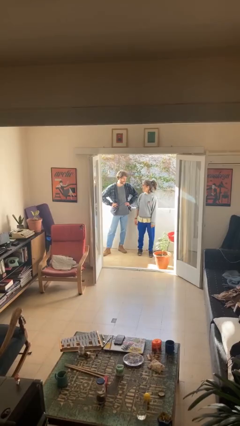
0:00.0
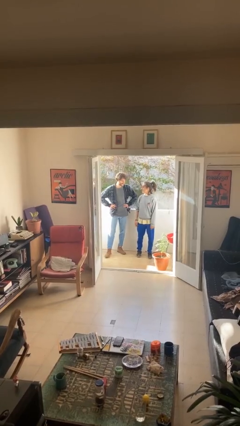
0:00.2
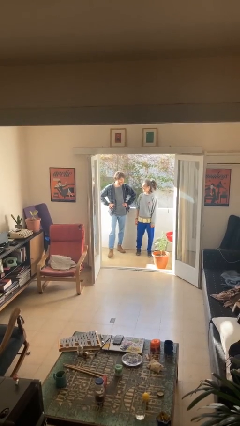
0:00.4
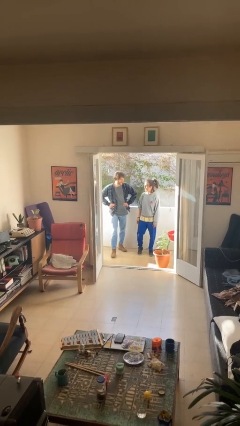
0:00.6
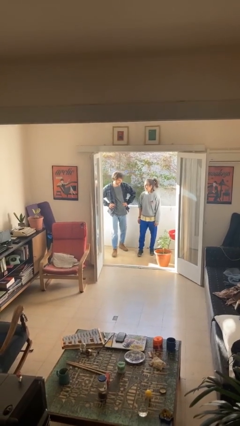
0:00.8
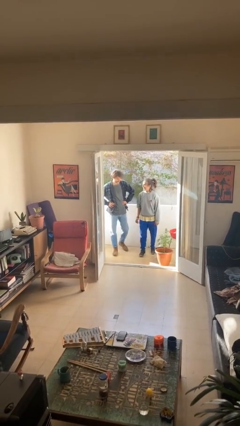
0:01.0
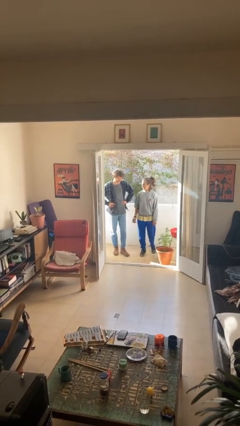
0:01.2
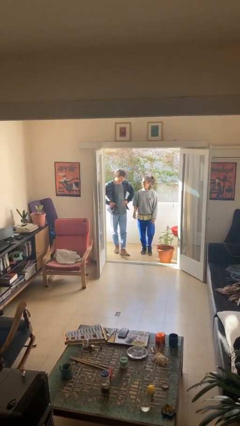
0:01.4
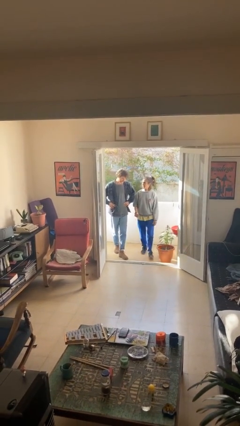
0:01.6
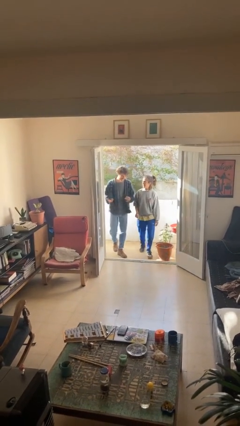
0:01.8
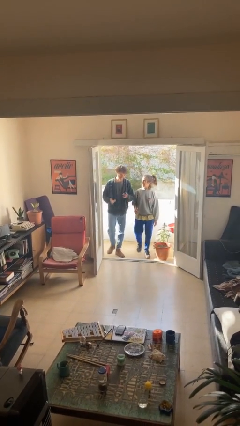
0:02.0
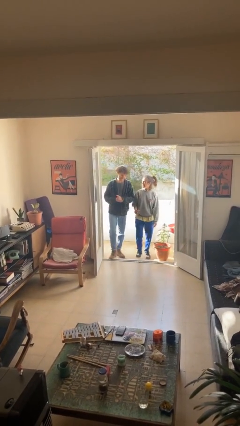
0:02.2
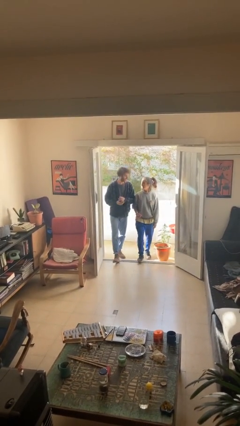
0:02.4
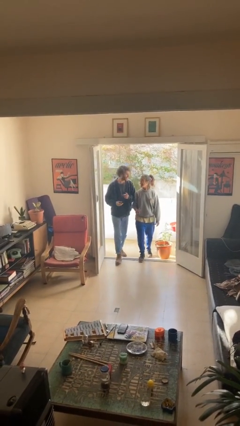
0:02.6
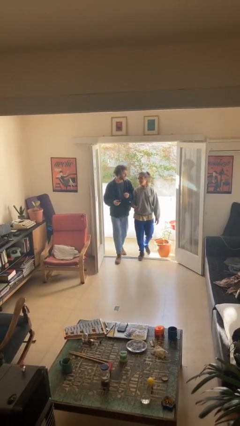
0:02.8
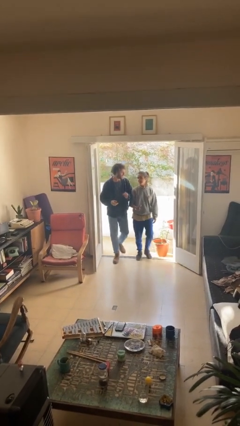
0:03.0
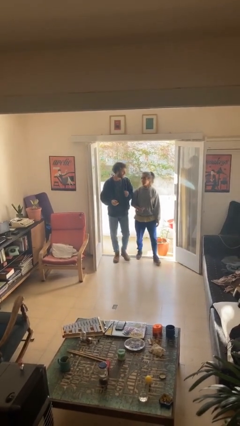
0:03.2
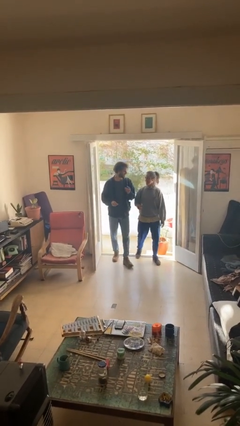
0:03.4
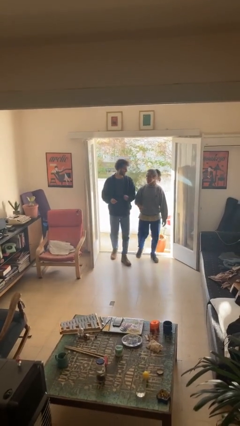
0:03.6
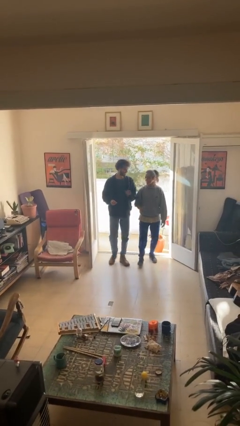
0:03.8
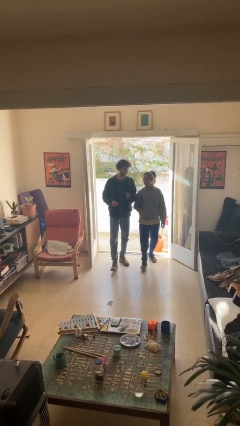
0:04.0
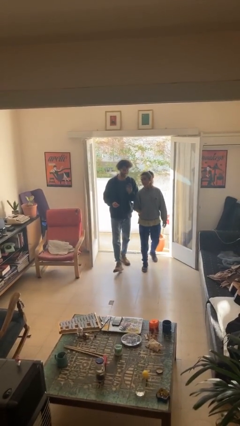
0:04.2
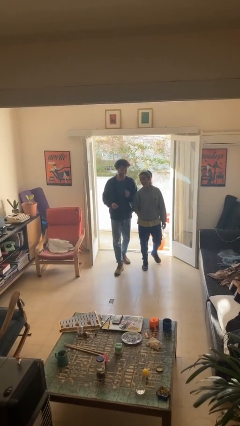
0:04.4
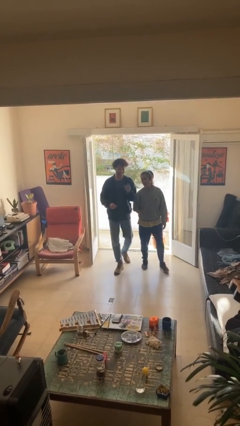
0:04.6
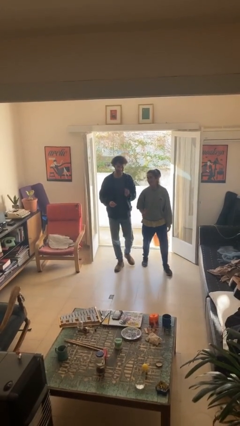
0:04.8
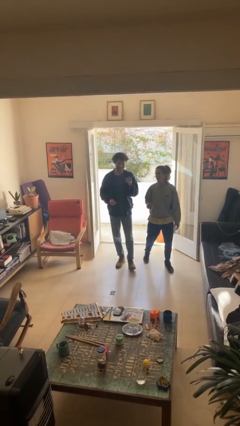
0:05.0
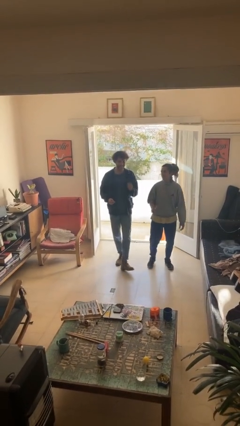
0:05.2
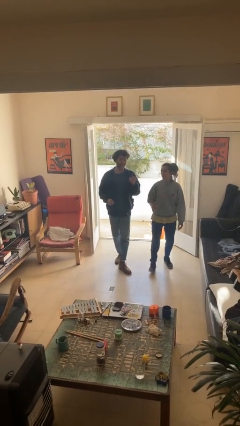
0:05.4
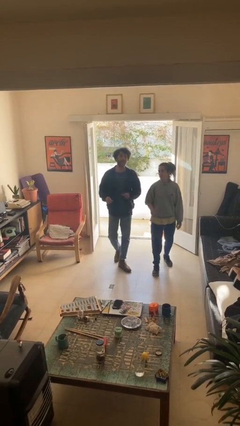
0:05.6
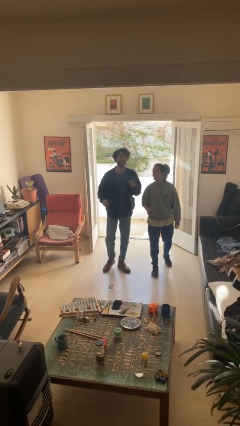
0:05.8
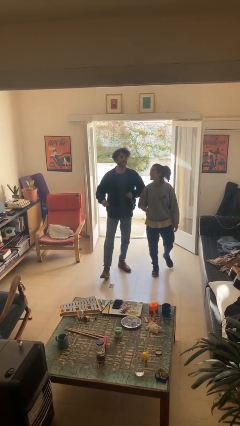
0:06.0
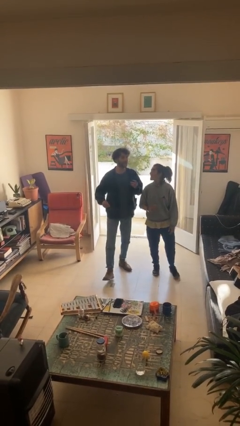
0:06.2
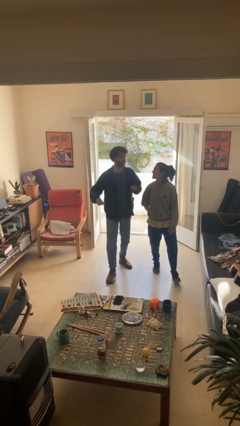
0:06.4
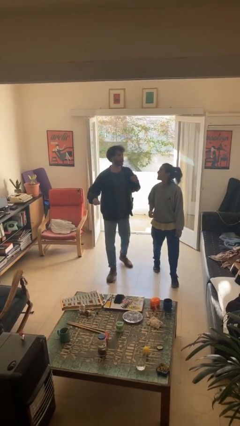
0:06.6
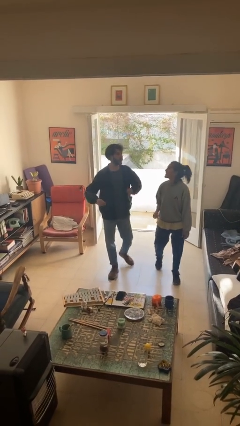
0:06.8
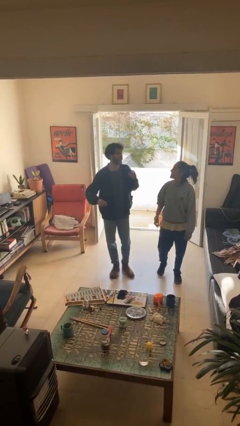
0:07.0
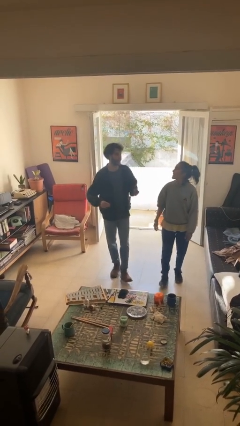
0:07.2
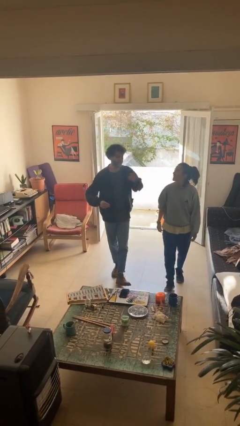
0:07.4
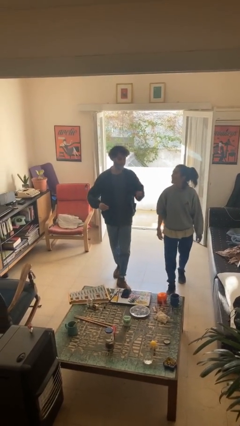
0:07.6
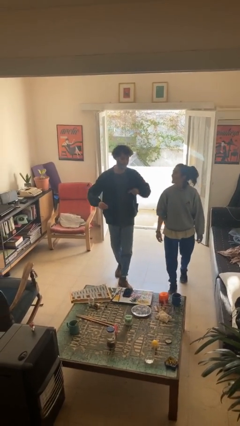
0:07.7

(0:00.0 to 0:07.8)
person talks to person

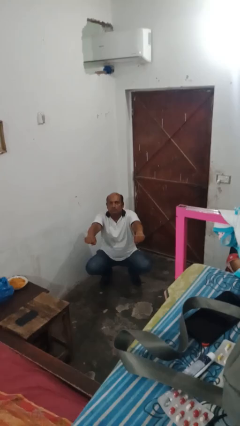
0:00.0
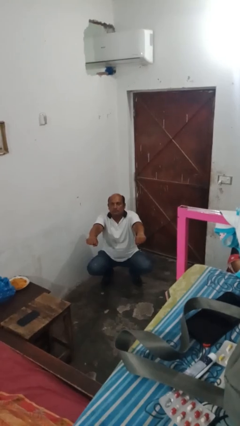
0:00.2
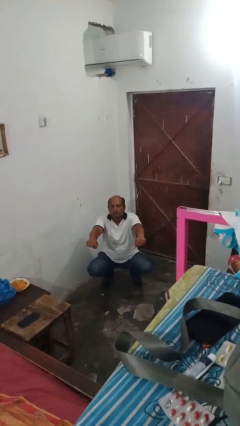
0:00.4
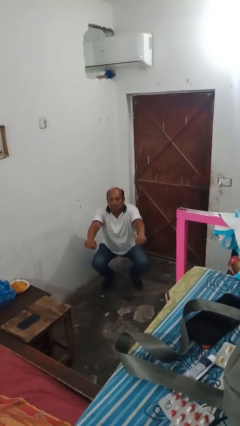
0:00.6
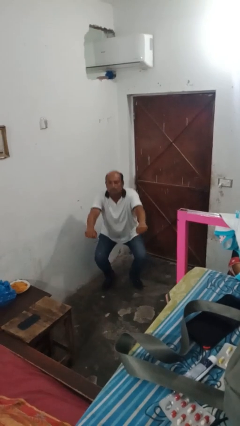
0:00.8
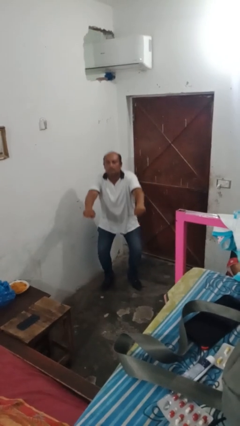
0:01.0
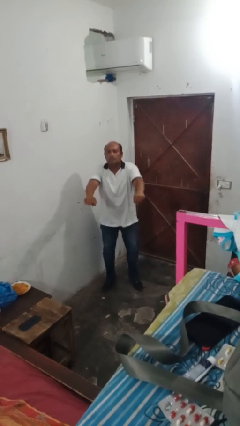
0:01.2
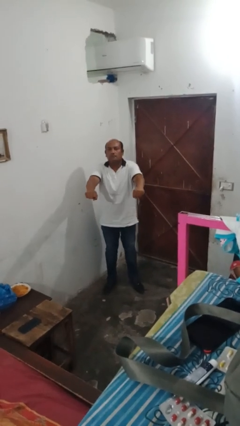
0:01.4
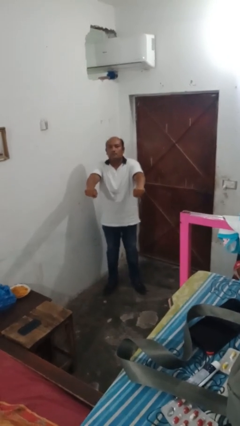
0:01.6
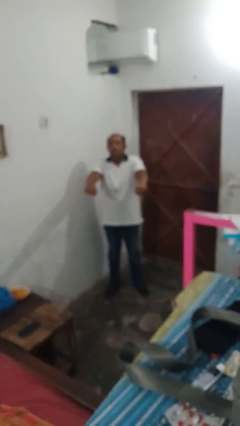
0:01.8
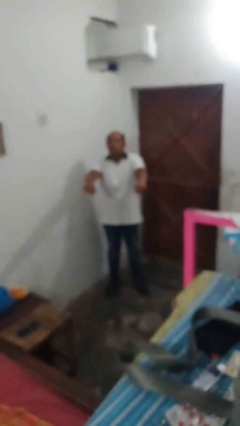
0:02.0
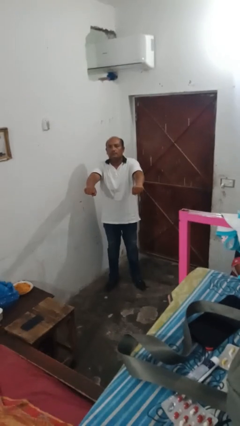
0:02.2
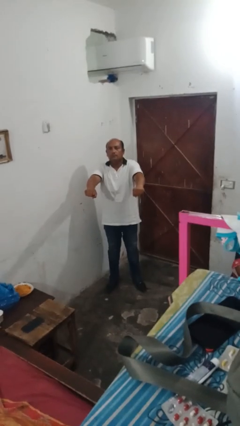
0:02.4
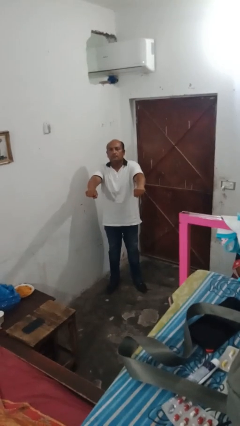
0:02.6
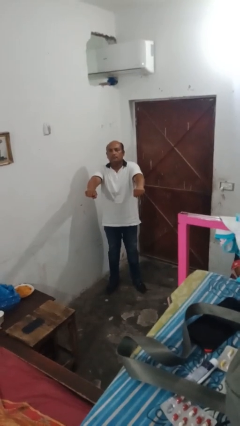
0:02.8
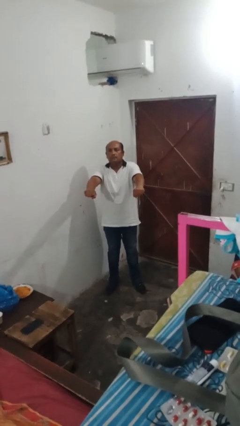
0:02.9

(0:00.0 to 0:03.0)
person stands up

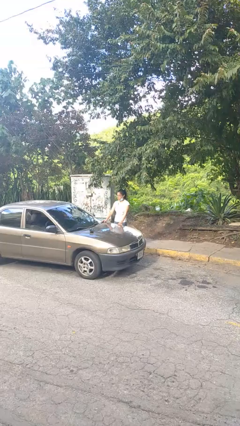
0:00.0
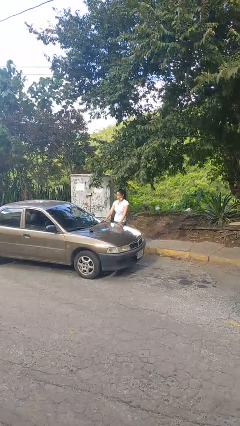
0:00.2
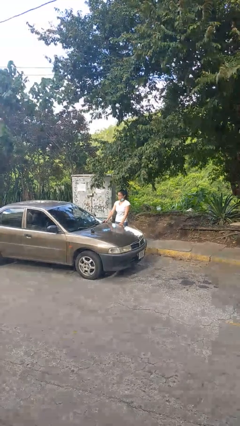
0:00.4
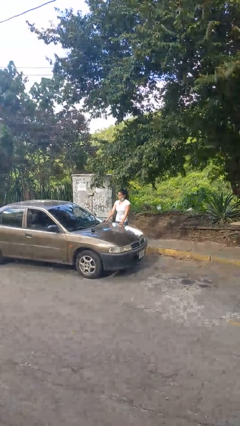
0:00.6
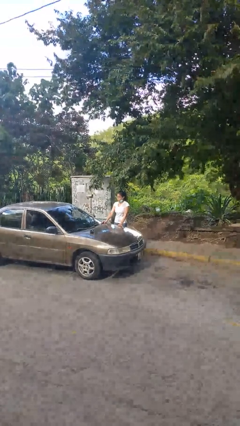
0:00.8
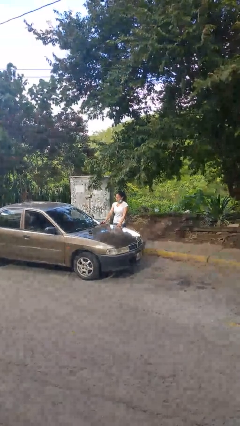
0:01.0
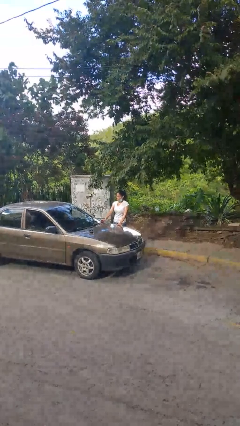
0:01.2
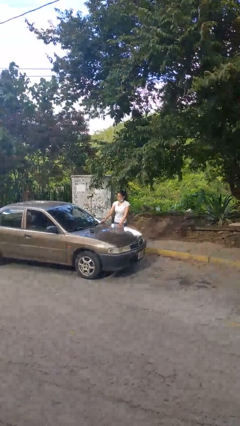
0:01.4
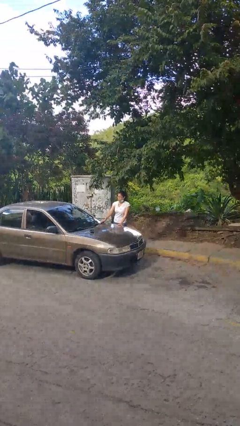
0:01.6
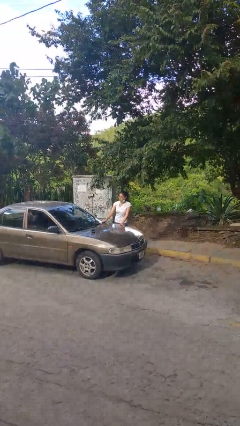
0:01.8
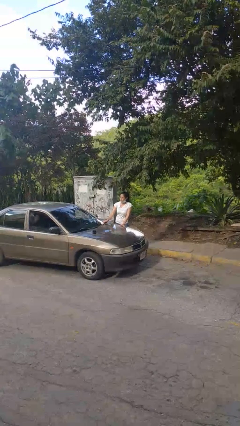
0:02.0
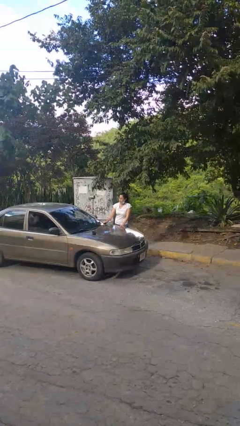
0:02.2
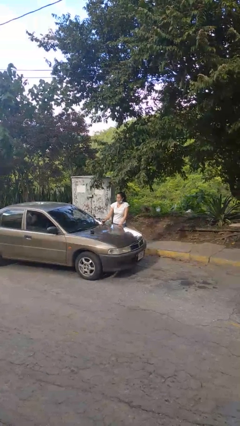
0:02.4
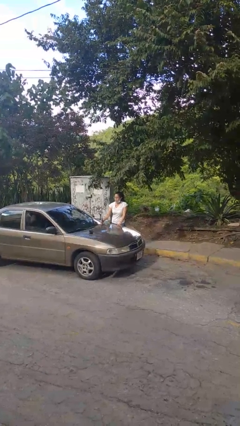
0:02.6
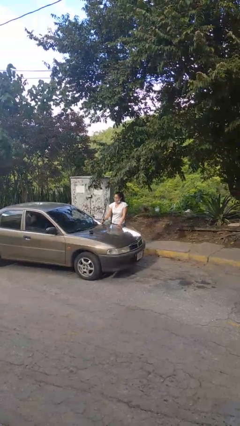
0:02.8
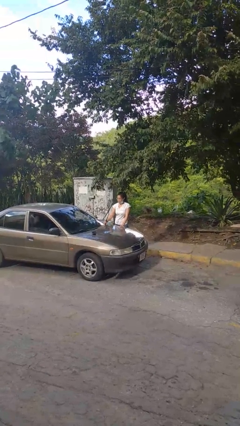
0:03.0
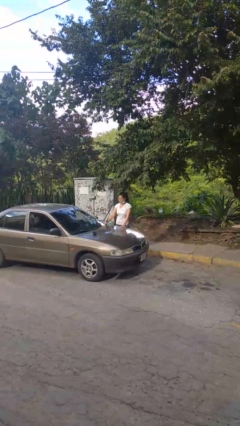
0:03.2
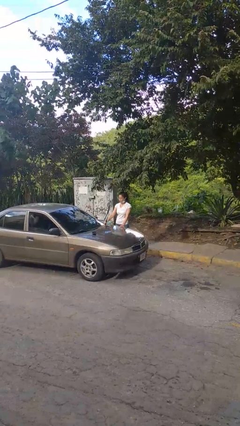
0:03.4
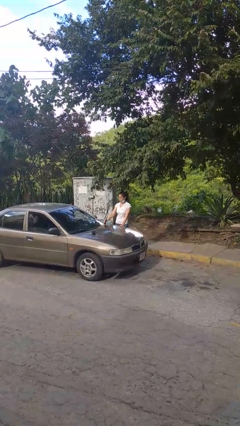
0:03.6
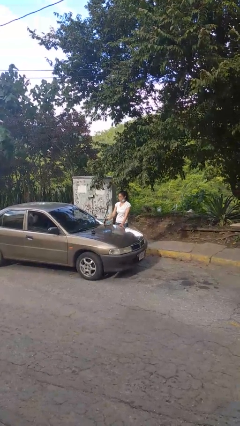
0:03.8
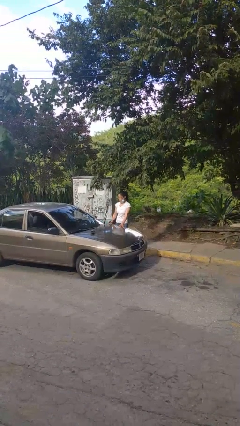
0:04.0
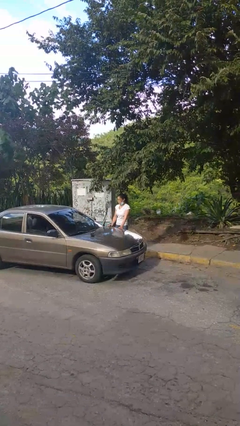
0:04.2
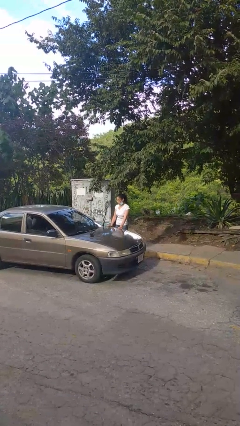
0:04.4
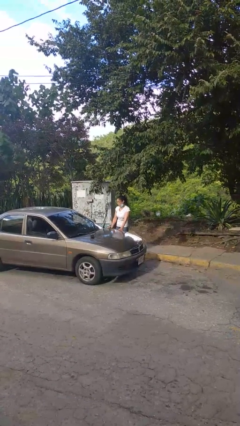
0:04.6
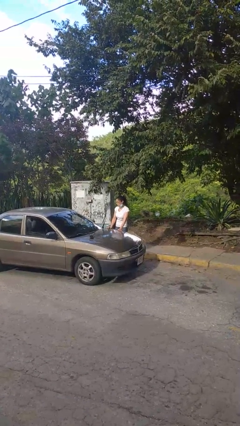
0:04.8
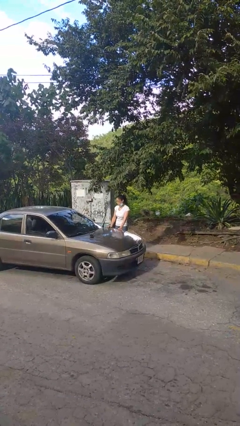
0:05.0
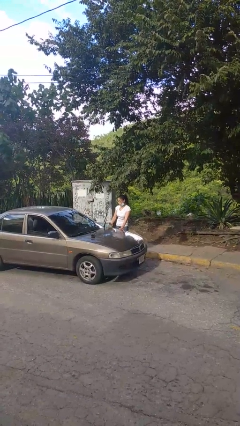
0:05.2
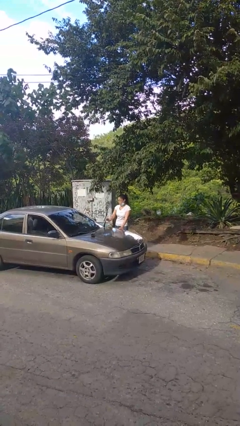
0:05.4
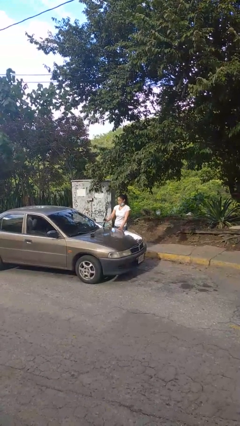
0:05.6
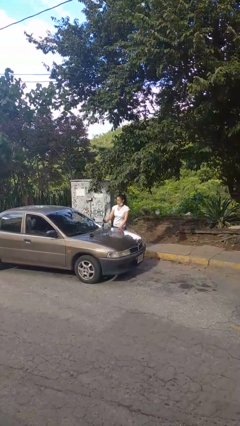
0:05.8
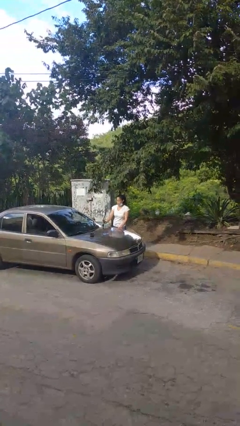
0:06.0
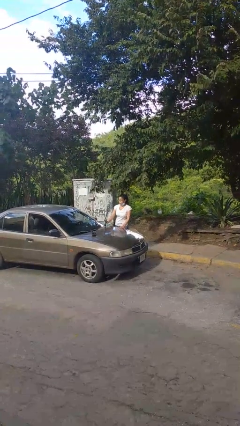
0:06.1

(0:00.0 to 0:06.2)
person flips up car wipers

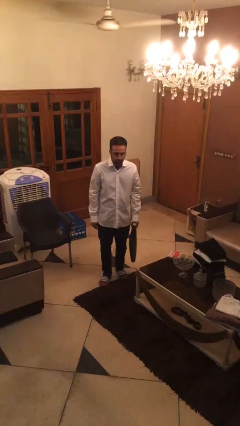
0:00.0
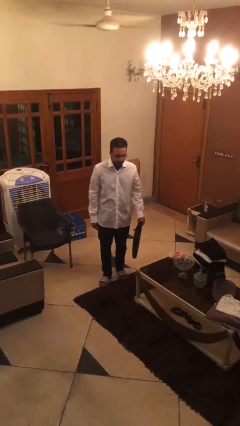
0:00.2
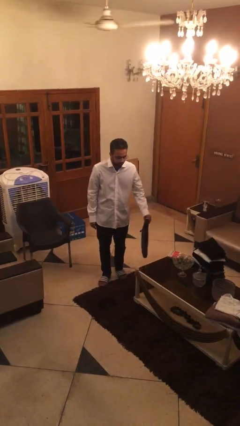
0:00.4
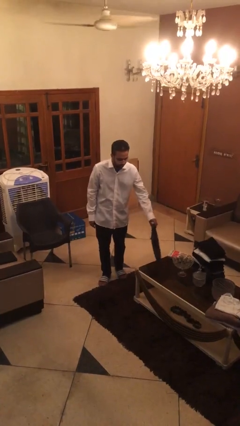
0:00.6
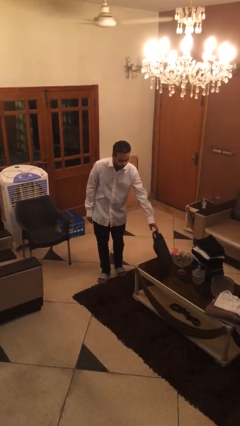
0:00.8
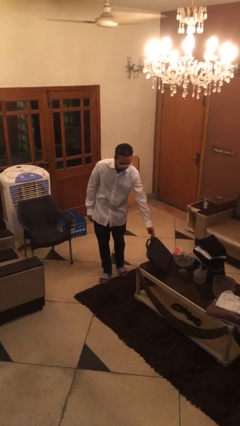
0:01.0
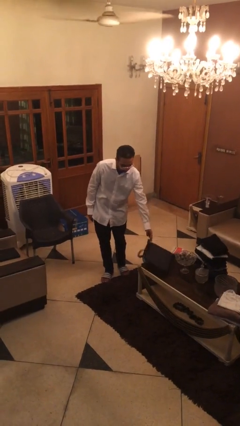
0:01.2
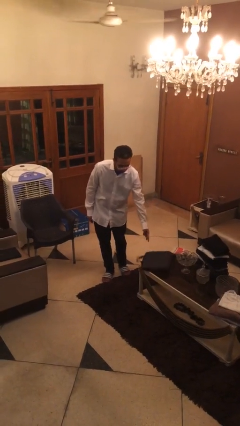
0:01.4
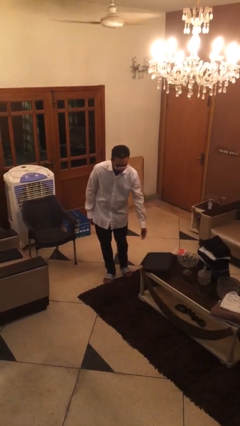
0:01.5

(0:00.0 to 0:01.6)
person puts down object on table
